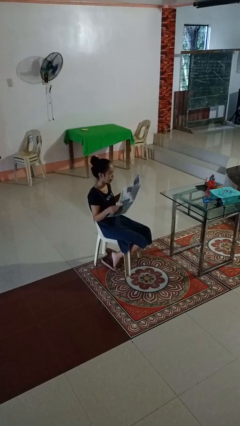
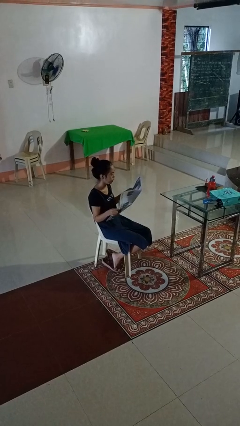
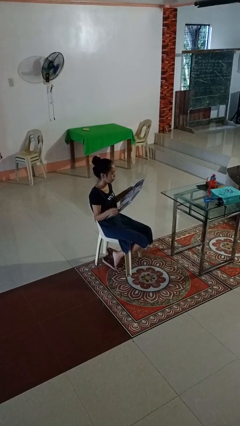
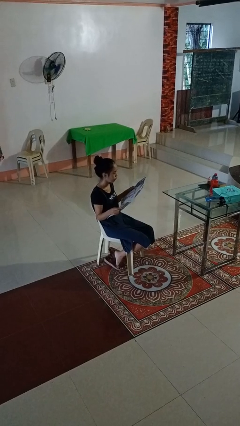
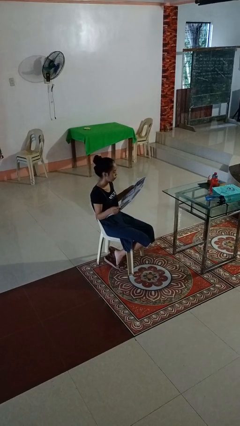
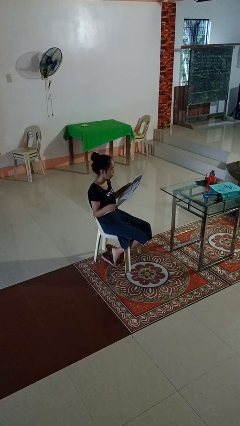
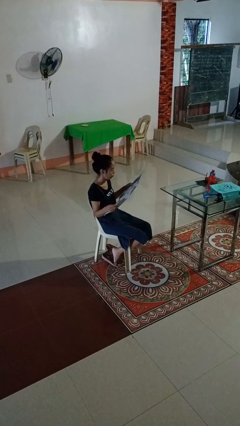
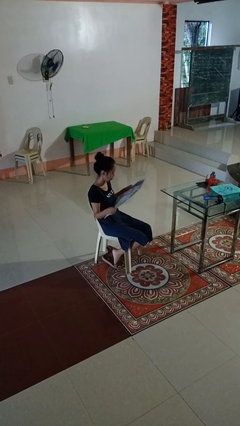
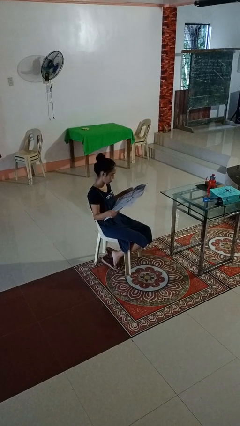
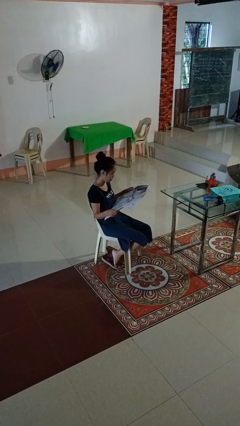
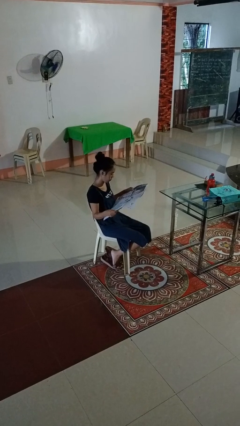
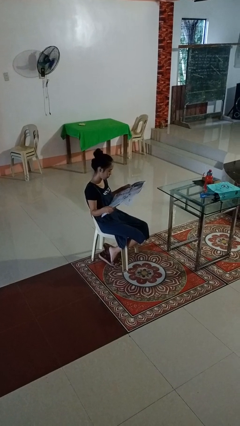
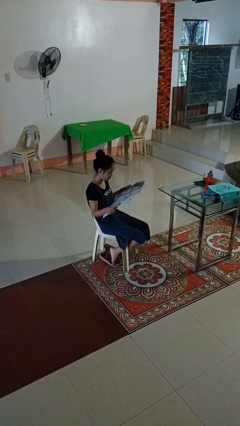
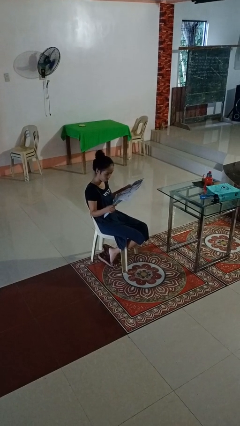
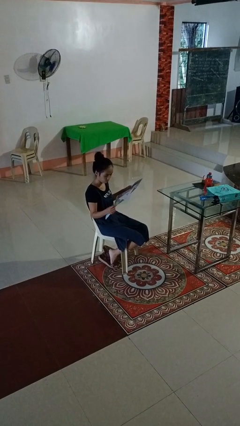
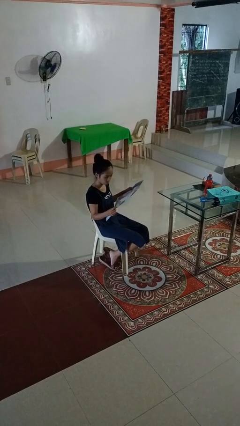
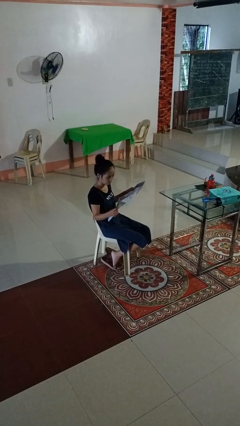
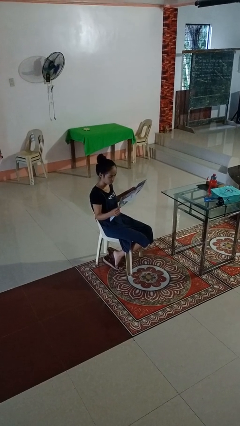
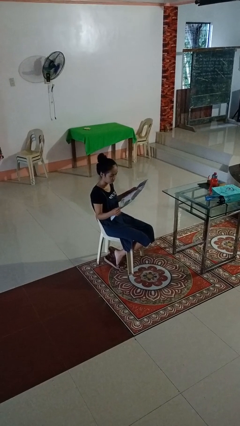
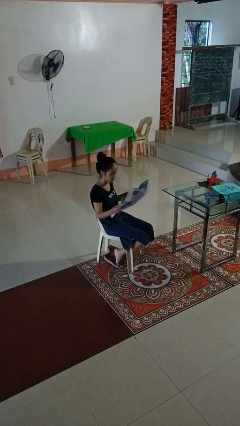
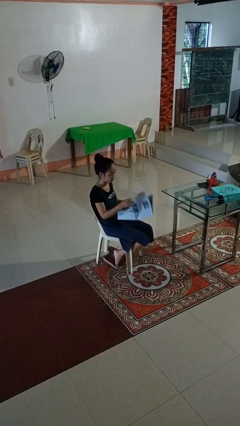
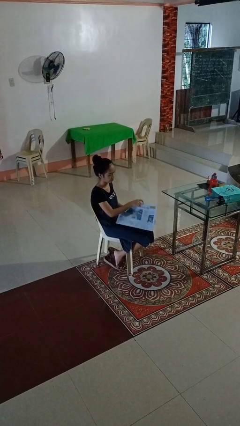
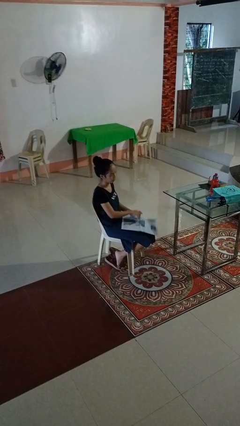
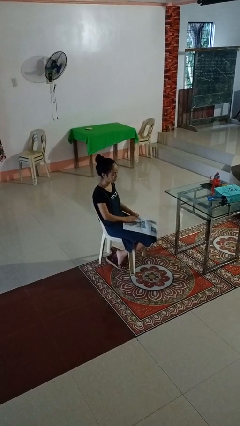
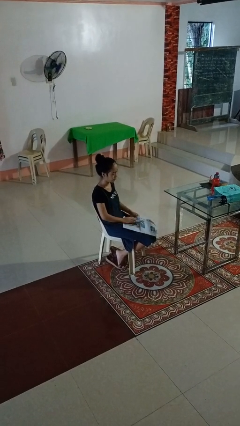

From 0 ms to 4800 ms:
person reads newspaper

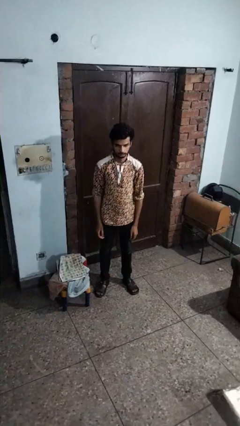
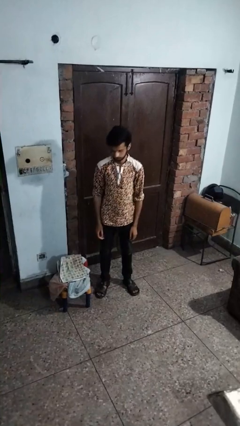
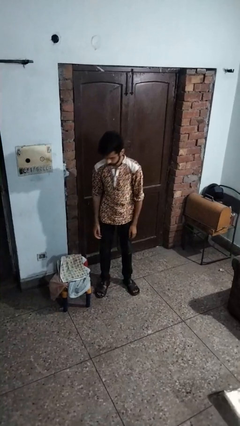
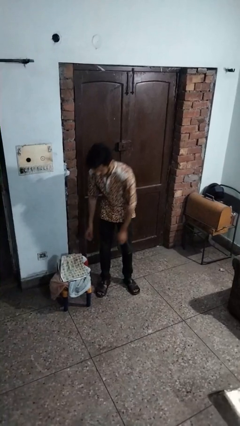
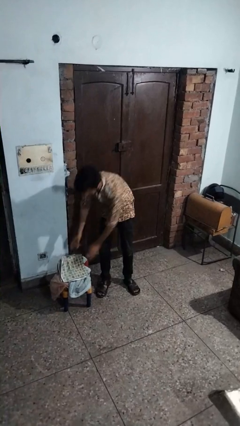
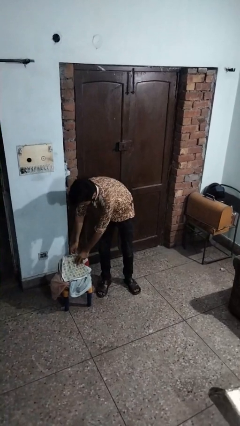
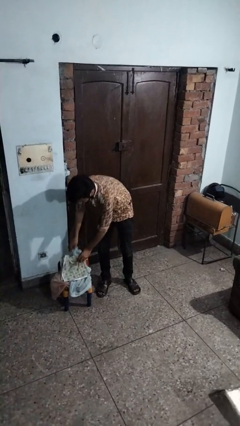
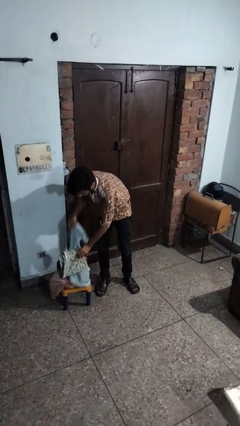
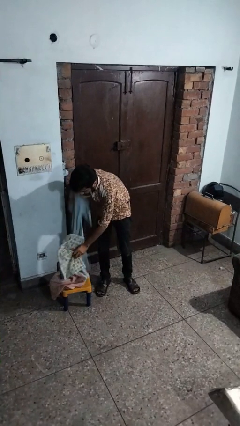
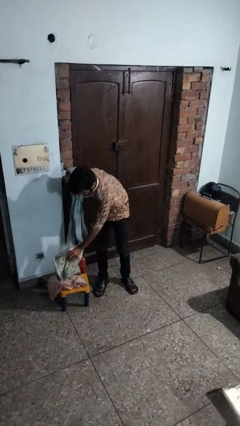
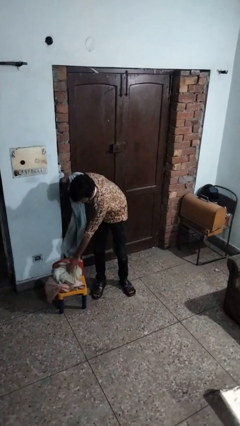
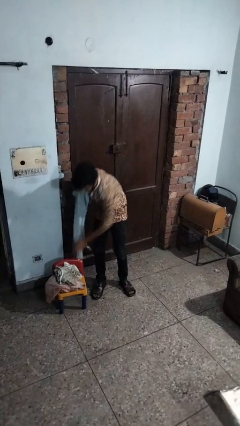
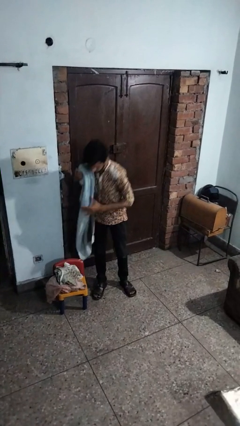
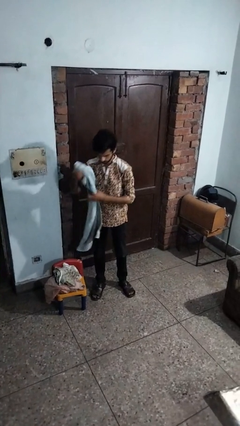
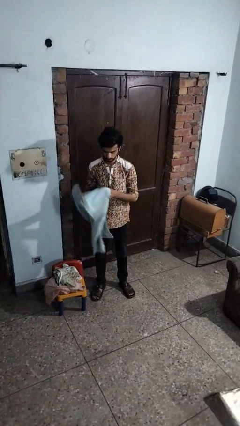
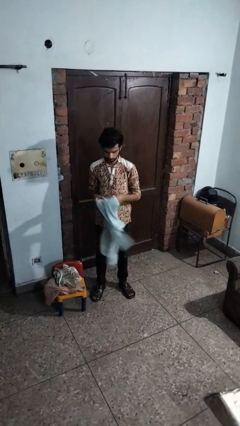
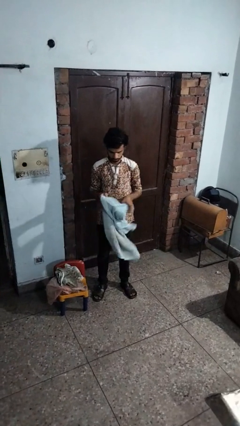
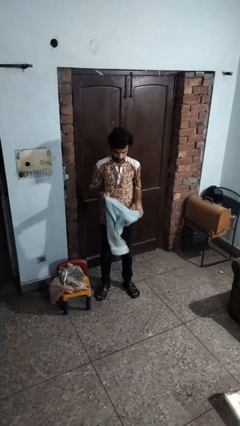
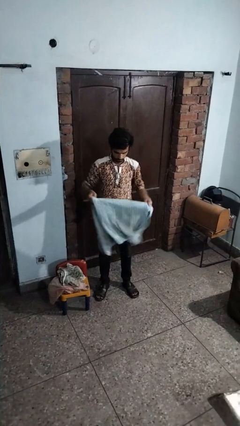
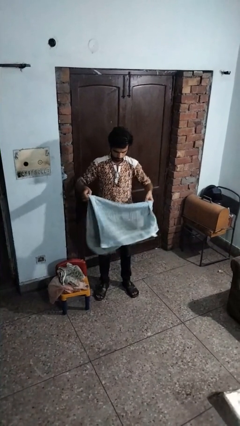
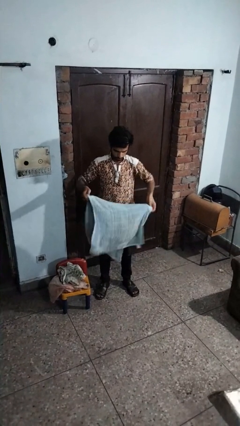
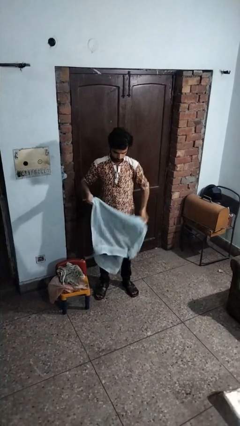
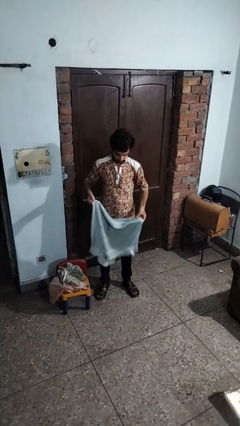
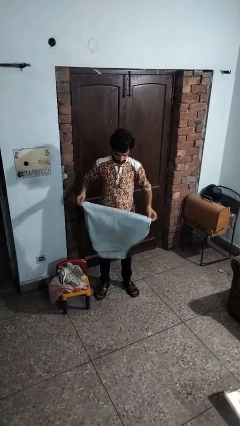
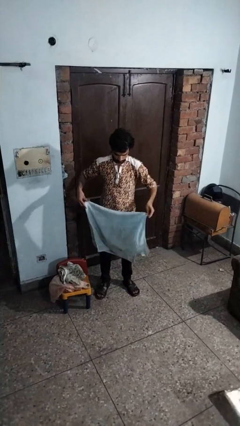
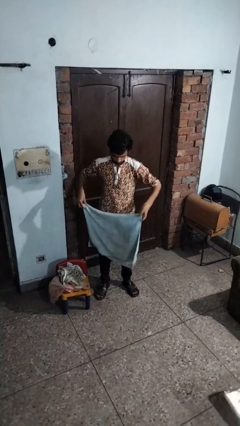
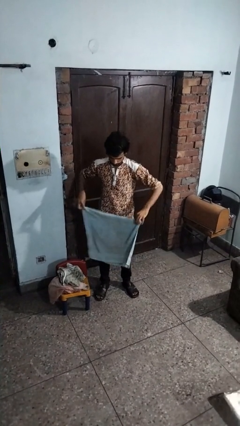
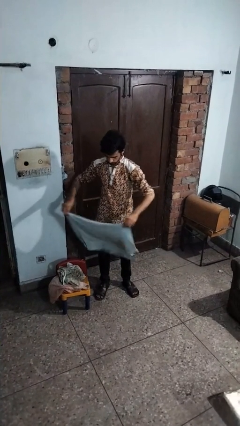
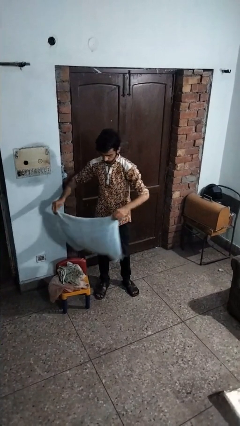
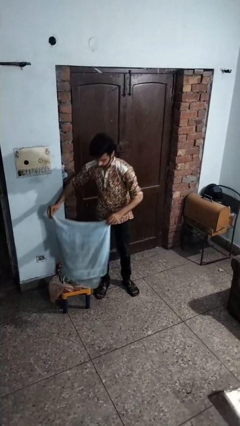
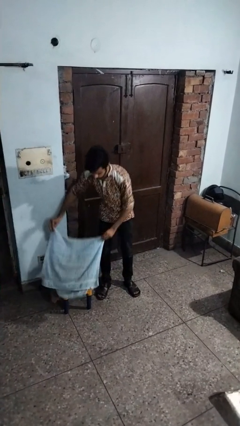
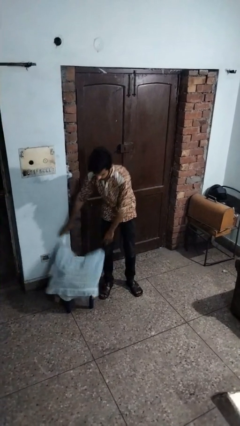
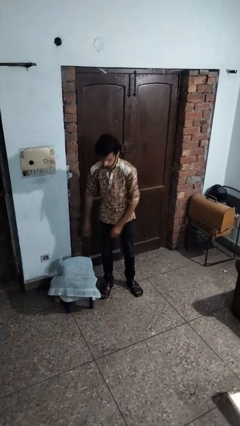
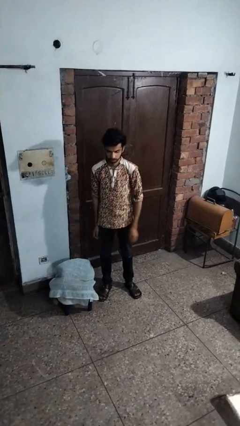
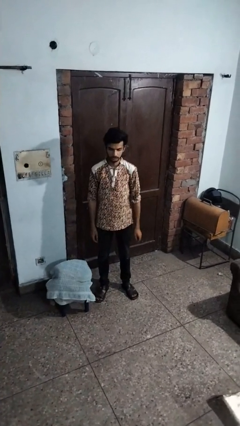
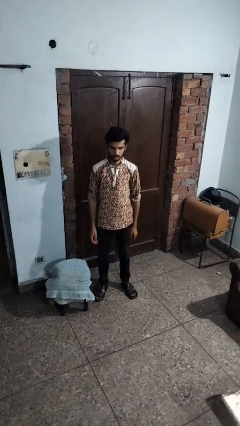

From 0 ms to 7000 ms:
person folds towel

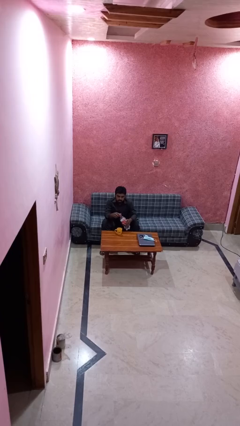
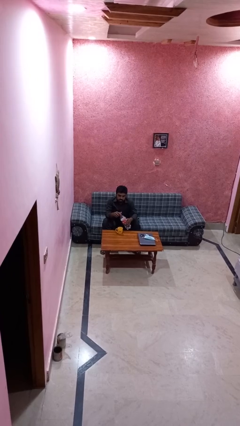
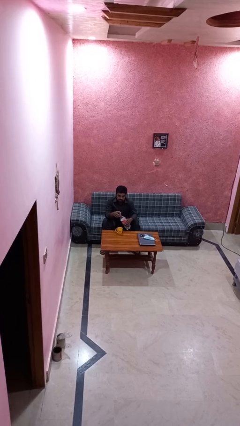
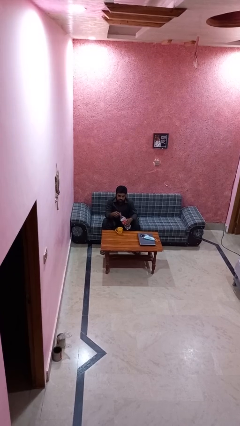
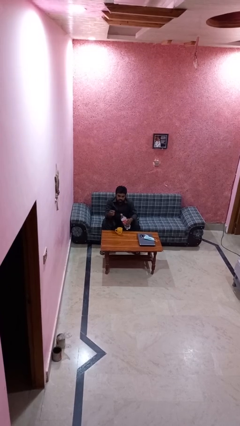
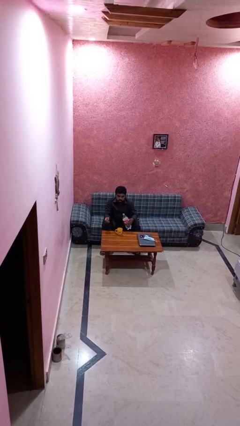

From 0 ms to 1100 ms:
person unscrews lid from bottle

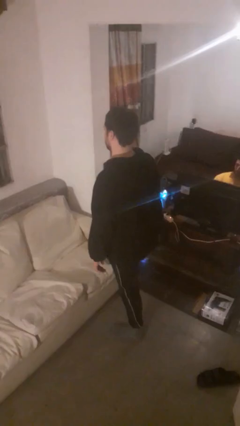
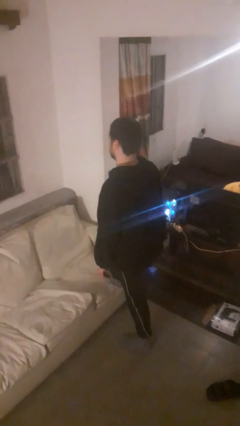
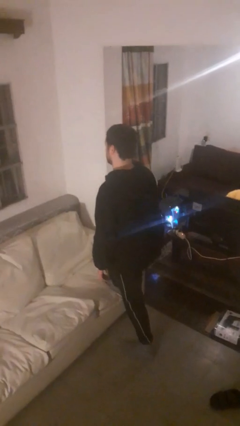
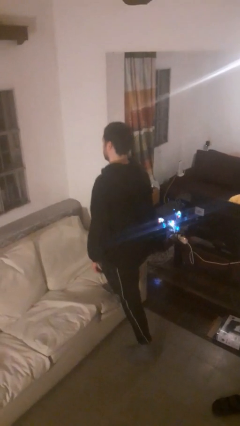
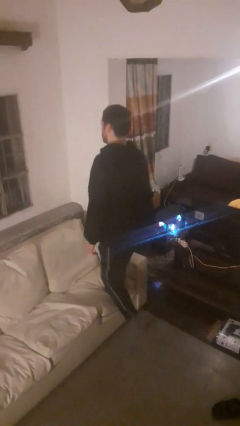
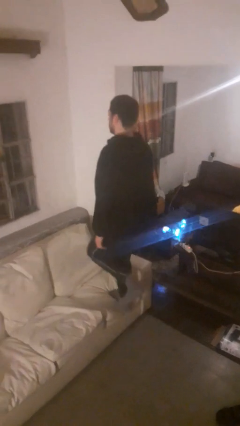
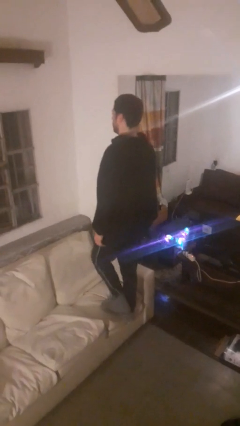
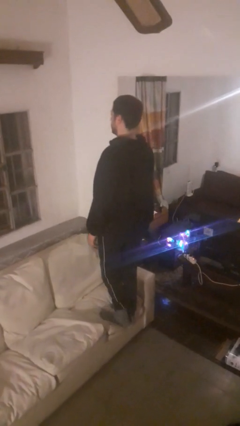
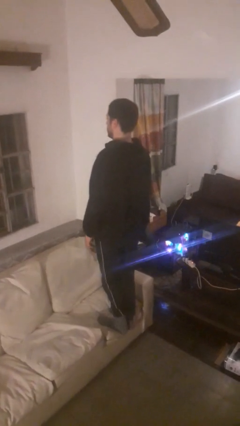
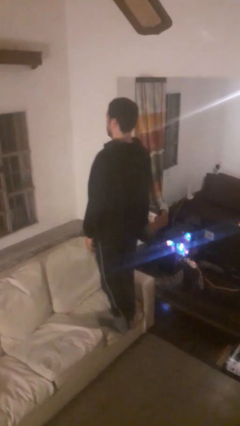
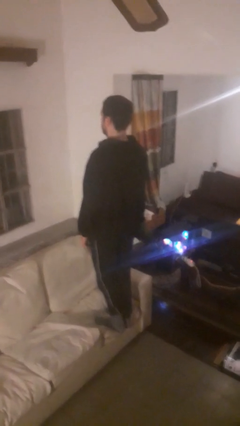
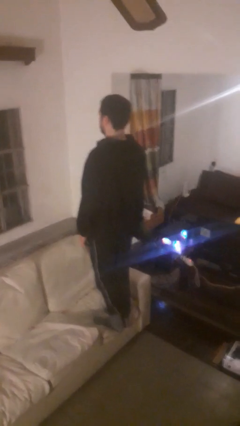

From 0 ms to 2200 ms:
person climbs on couch

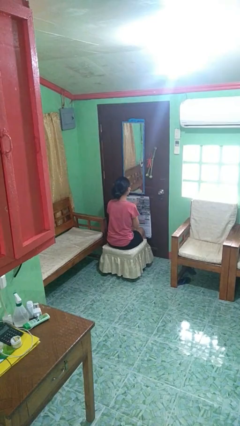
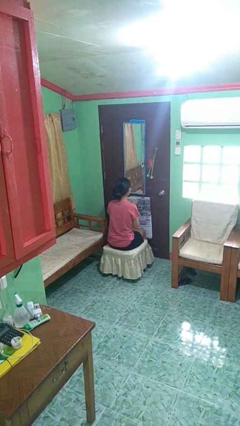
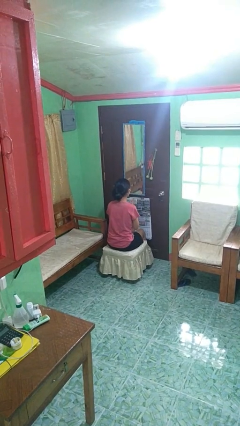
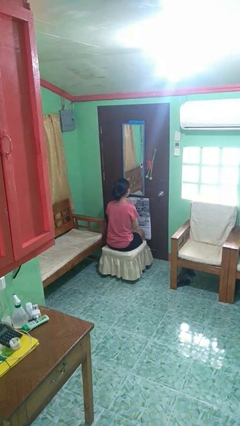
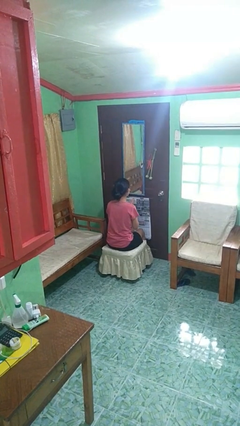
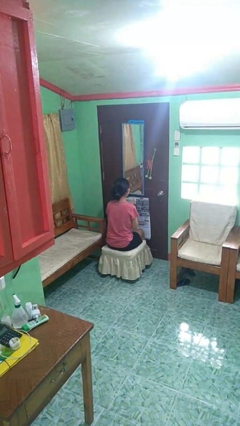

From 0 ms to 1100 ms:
person claps hands

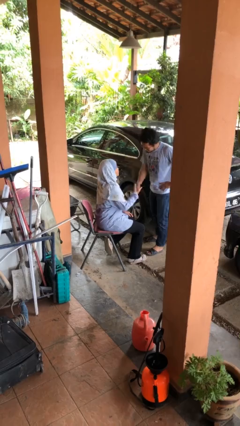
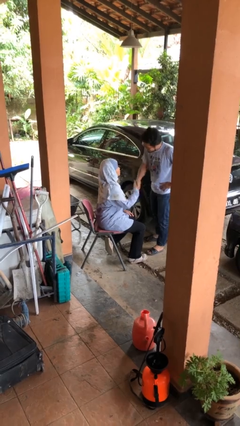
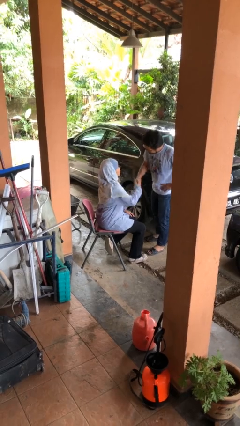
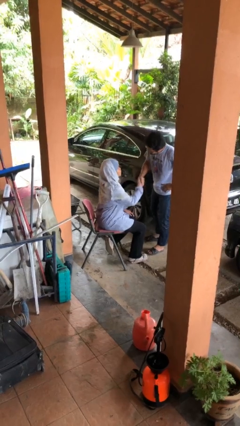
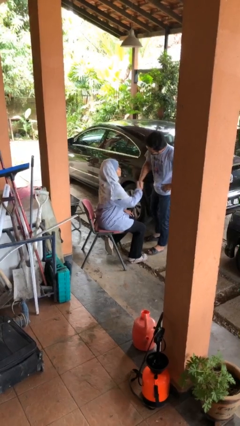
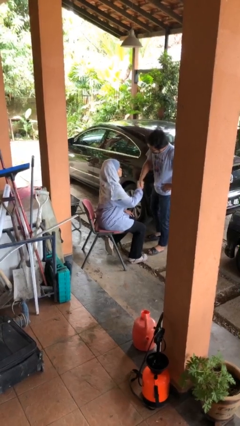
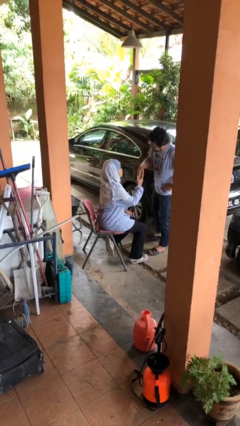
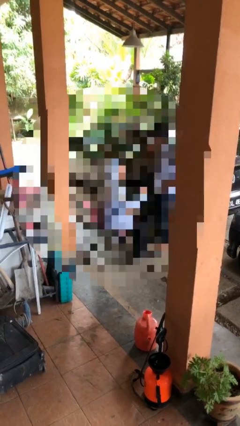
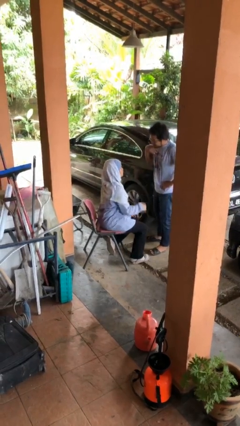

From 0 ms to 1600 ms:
person shakes hand

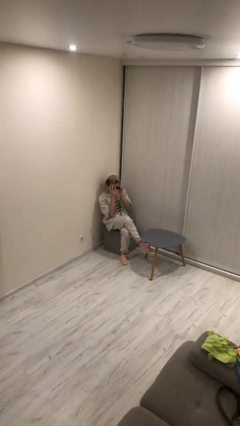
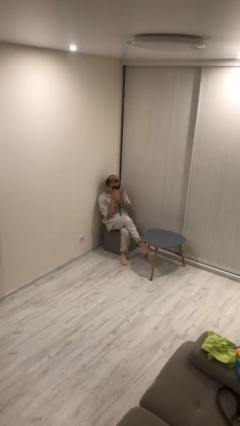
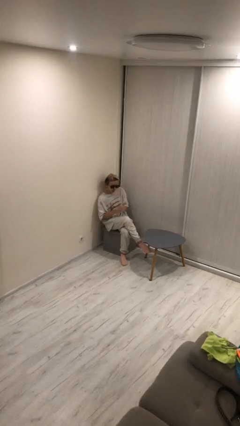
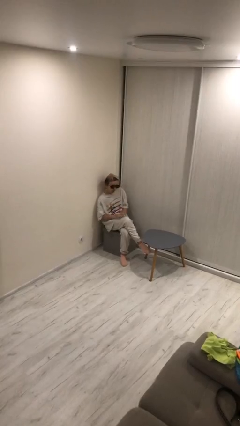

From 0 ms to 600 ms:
person puts on sunglasses
